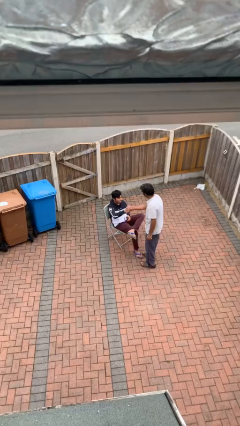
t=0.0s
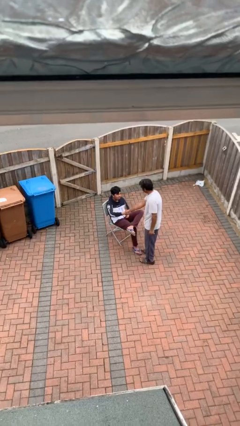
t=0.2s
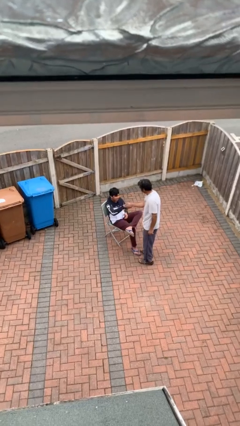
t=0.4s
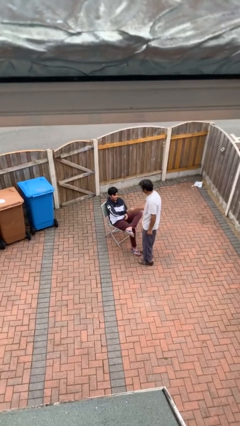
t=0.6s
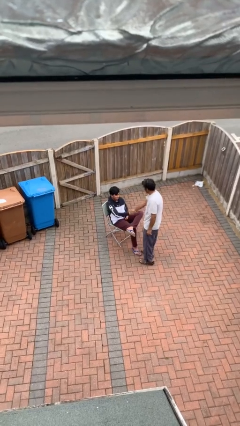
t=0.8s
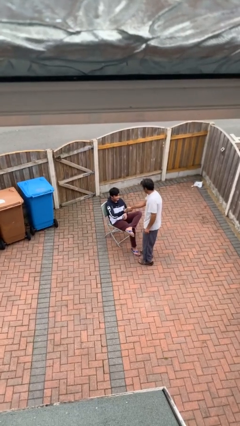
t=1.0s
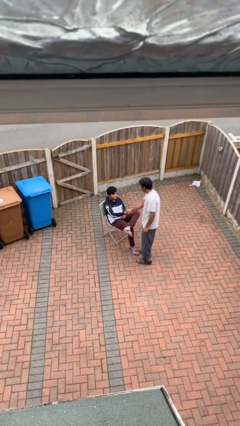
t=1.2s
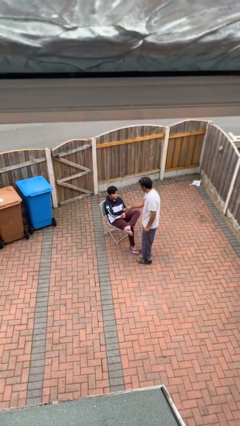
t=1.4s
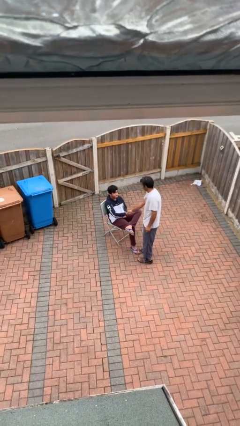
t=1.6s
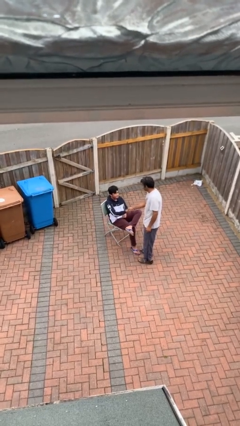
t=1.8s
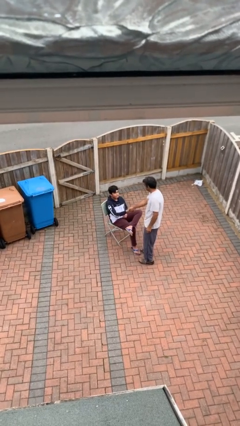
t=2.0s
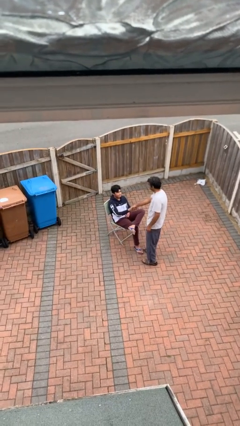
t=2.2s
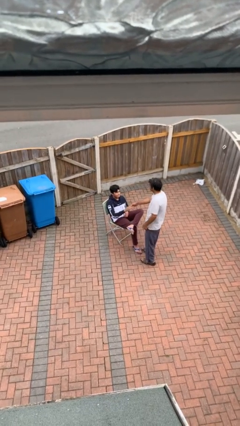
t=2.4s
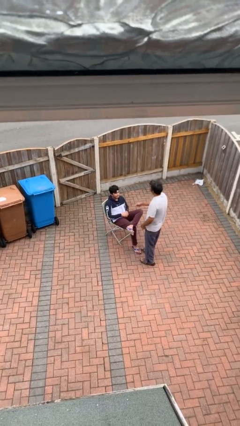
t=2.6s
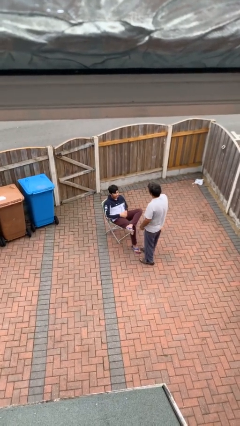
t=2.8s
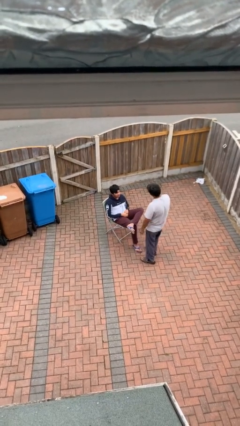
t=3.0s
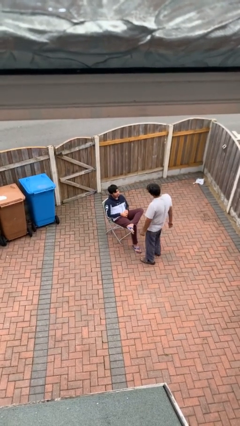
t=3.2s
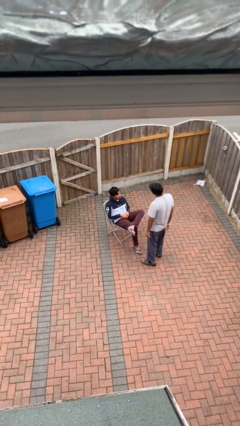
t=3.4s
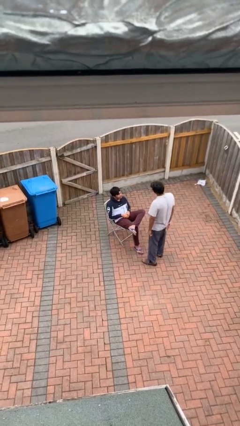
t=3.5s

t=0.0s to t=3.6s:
person shakes hand

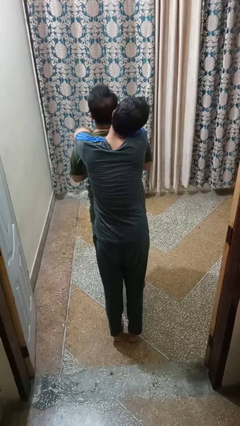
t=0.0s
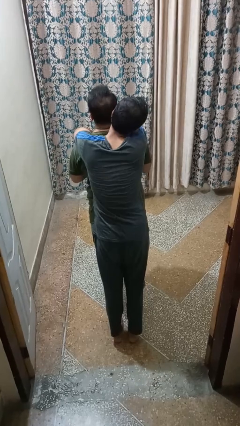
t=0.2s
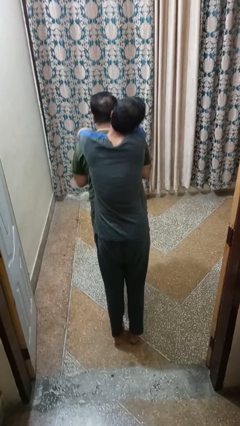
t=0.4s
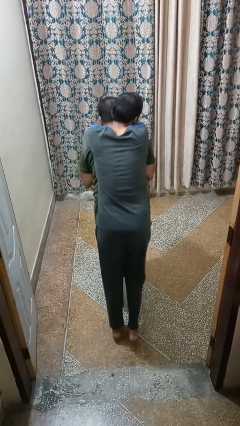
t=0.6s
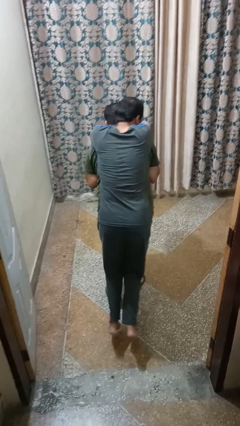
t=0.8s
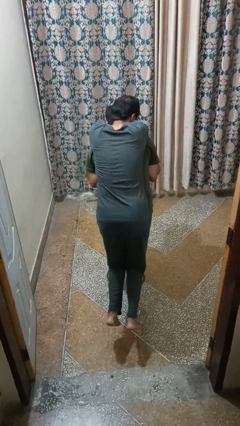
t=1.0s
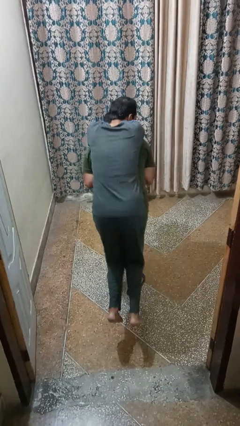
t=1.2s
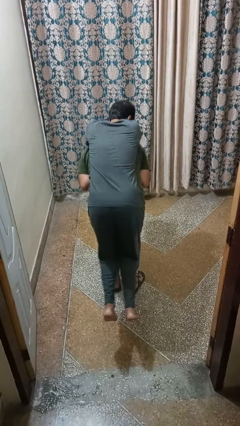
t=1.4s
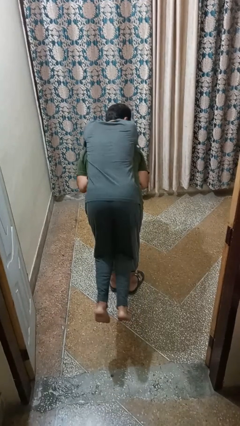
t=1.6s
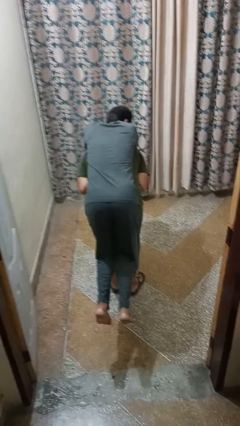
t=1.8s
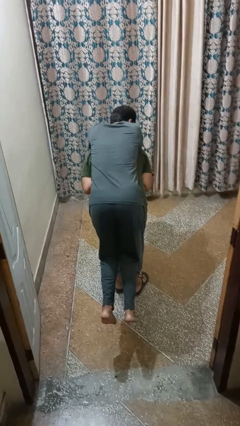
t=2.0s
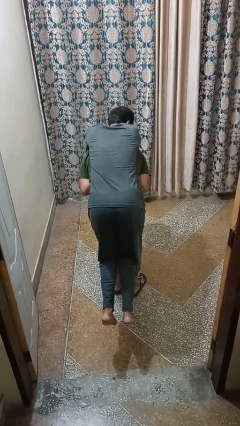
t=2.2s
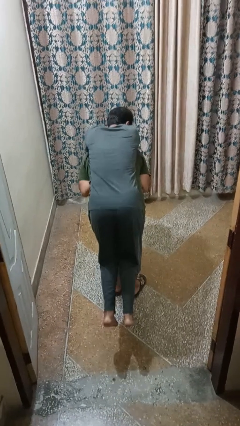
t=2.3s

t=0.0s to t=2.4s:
person carries person on back

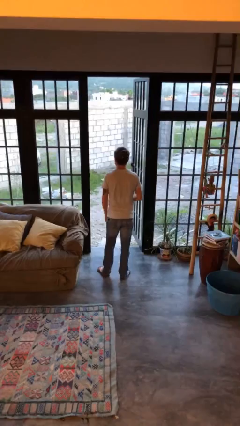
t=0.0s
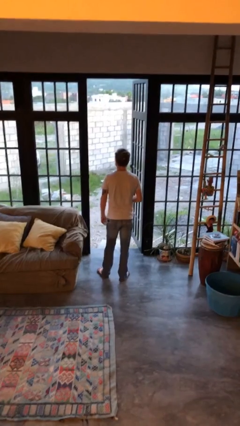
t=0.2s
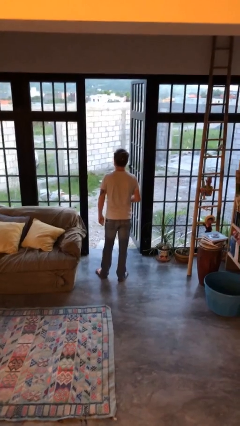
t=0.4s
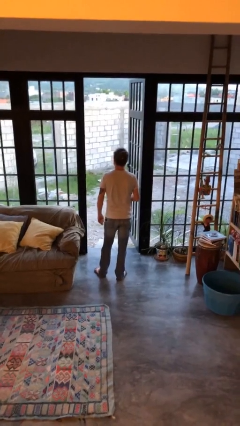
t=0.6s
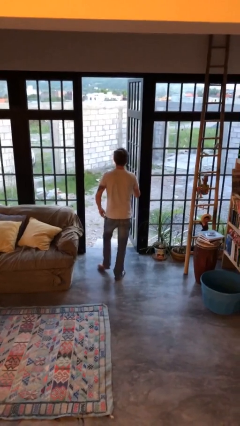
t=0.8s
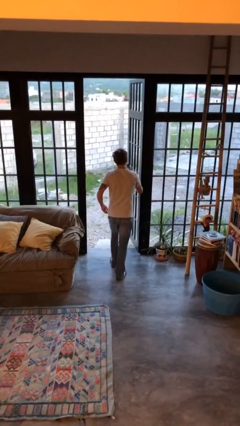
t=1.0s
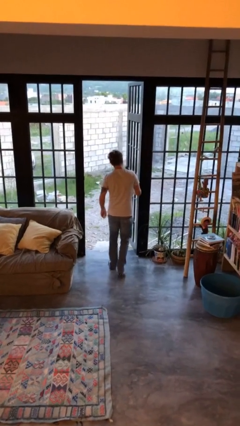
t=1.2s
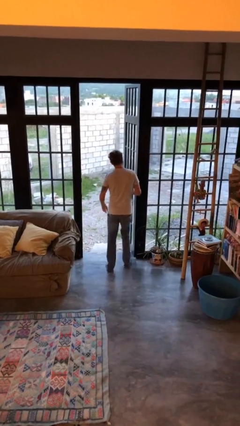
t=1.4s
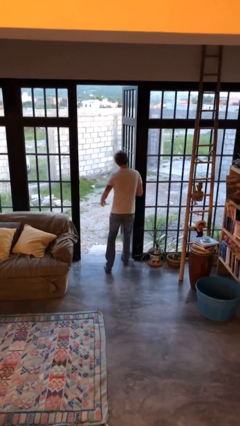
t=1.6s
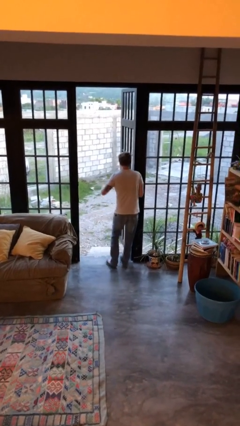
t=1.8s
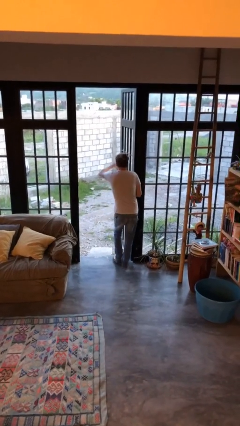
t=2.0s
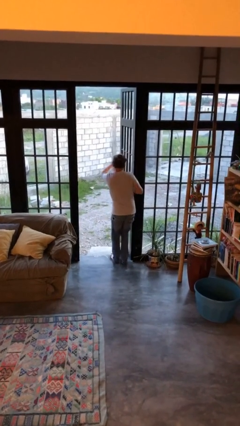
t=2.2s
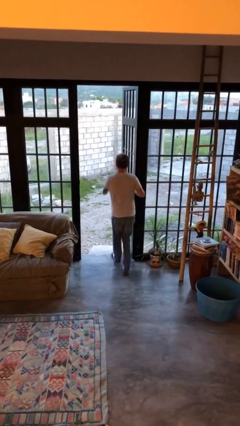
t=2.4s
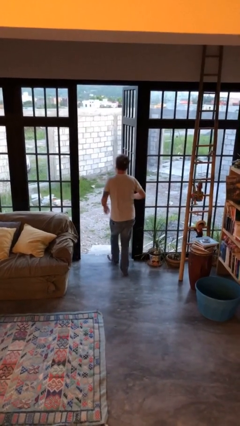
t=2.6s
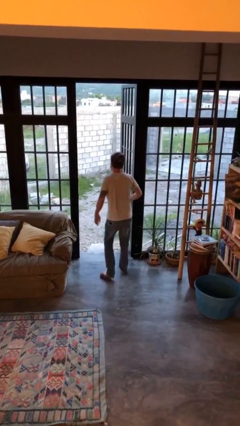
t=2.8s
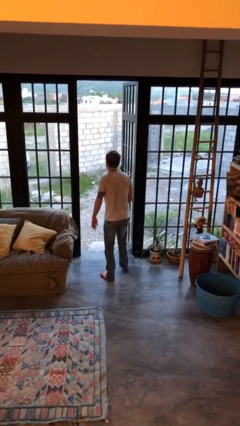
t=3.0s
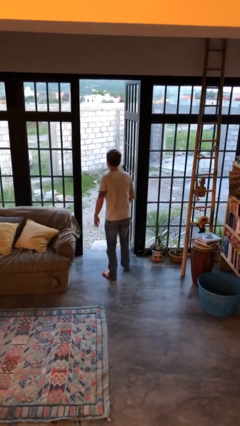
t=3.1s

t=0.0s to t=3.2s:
person bumps into wall

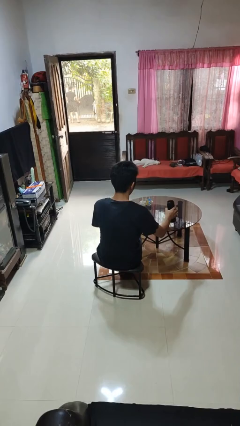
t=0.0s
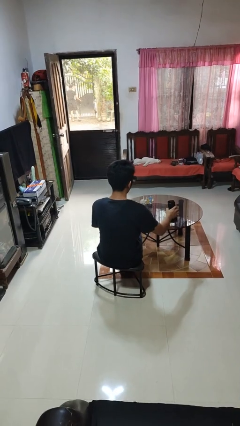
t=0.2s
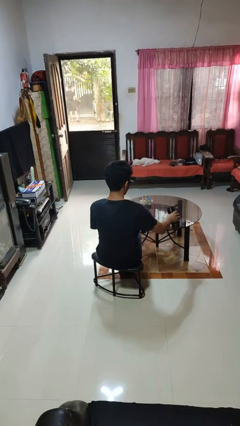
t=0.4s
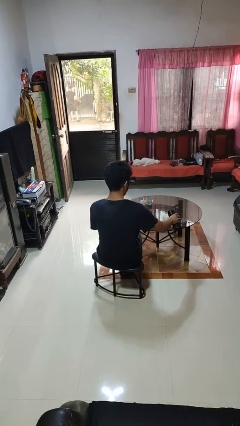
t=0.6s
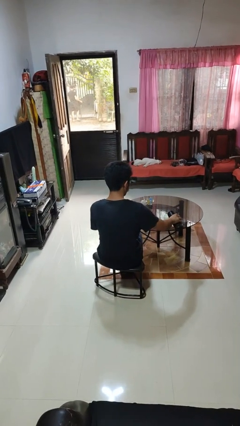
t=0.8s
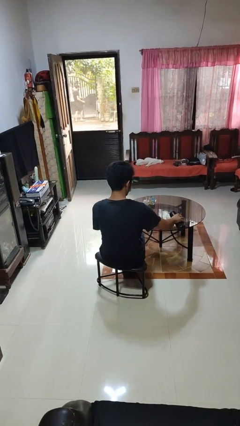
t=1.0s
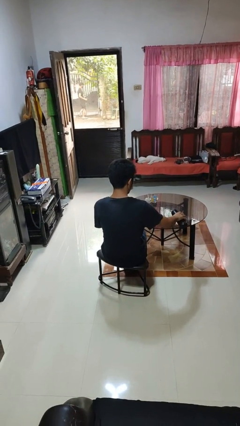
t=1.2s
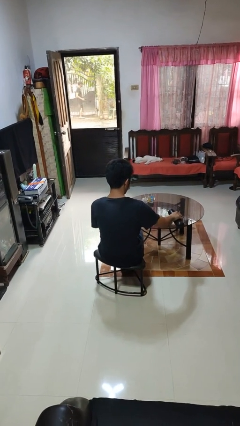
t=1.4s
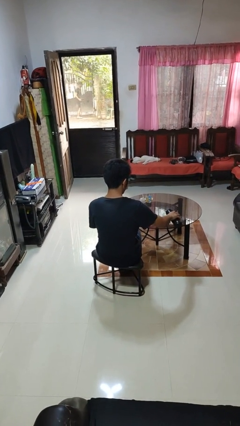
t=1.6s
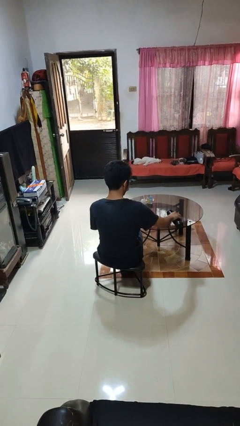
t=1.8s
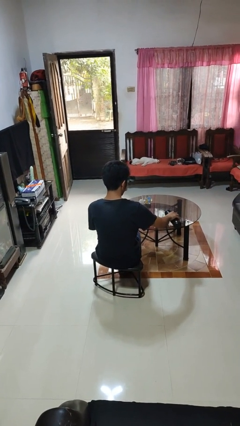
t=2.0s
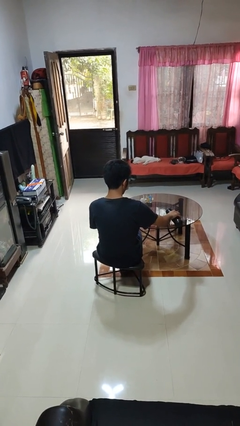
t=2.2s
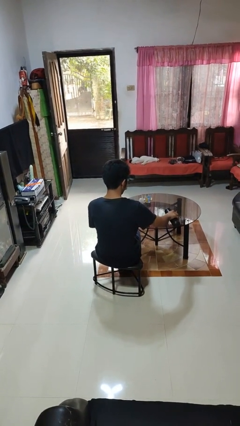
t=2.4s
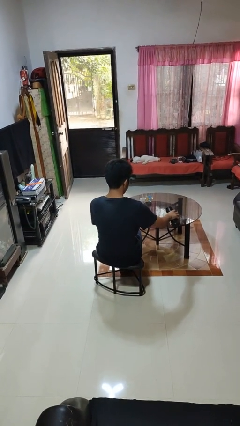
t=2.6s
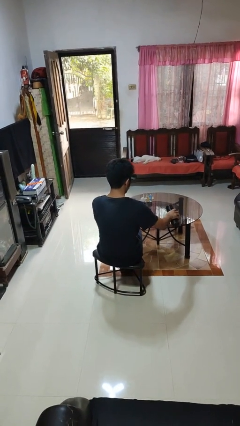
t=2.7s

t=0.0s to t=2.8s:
person pours liquid into cup

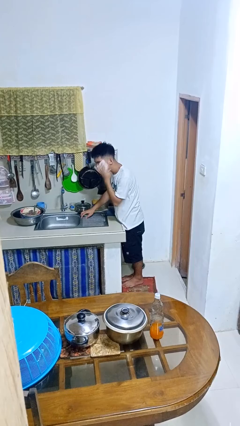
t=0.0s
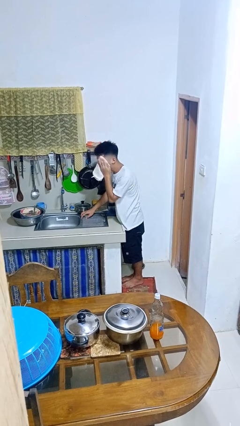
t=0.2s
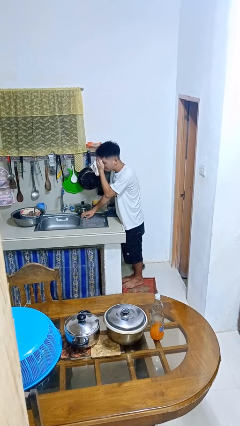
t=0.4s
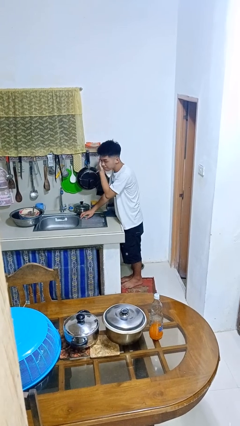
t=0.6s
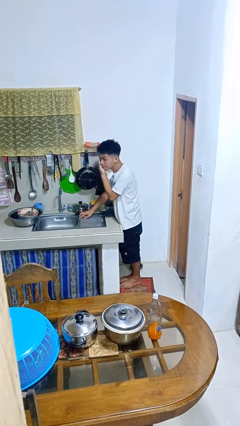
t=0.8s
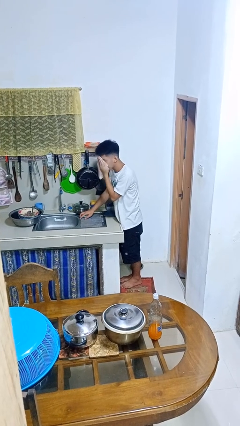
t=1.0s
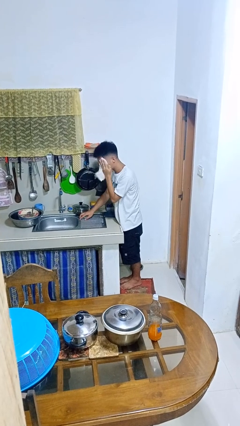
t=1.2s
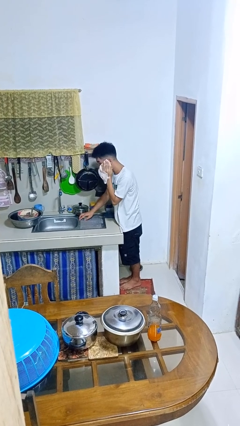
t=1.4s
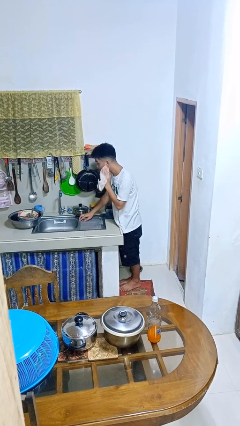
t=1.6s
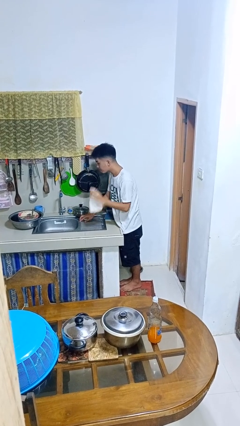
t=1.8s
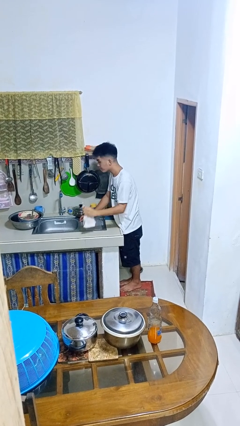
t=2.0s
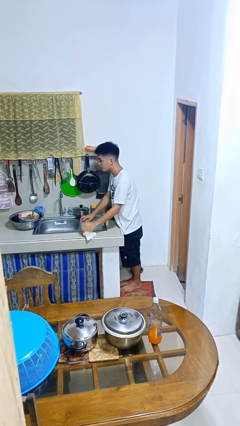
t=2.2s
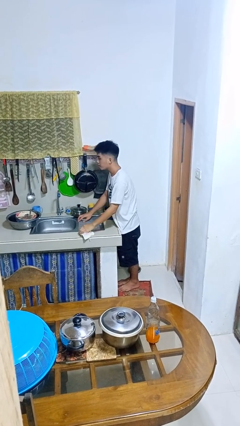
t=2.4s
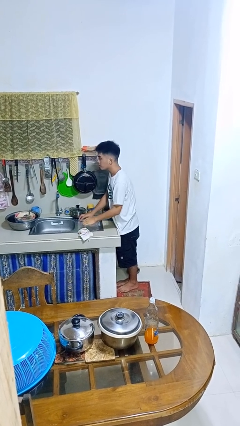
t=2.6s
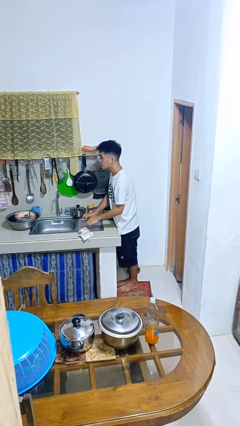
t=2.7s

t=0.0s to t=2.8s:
person dries face with towel

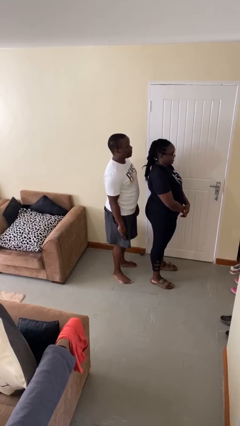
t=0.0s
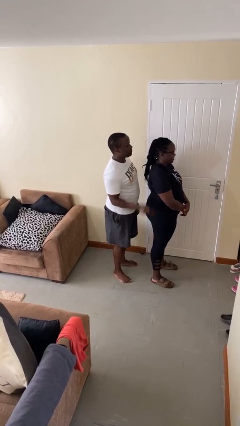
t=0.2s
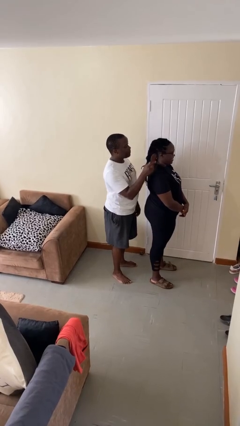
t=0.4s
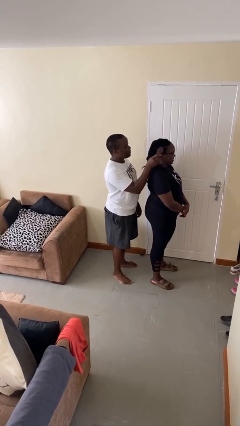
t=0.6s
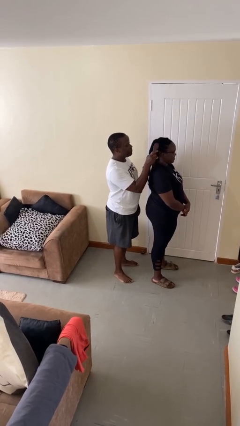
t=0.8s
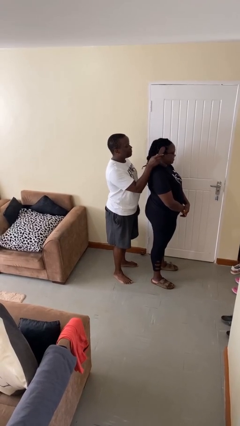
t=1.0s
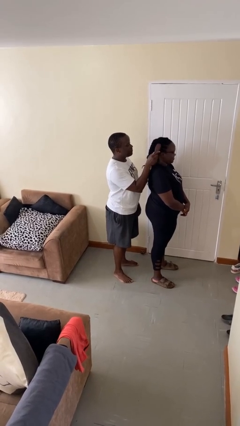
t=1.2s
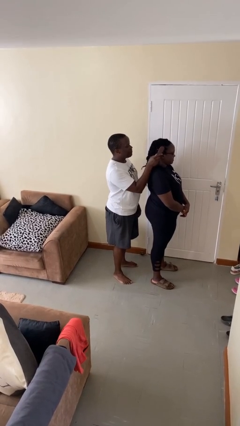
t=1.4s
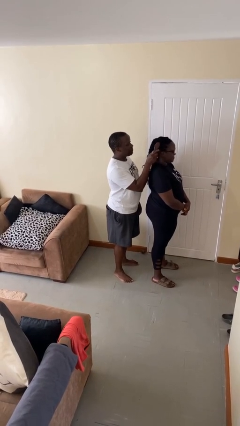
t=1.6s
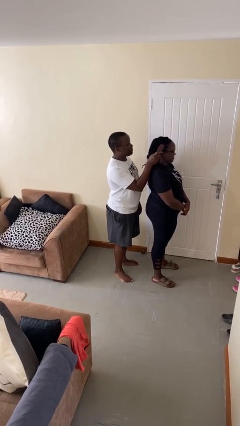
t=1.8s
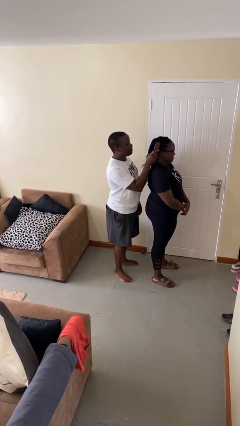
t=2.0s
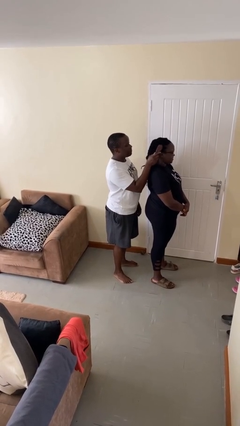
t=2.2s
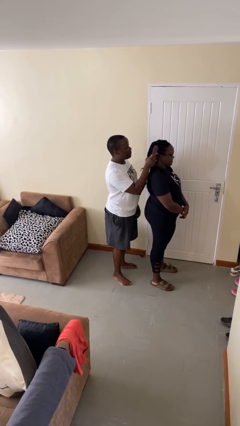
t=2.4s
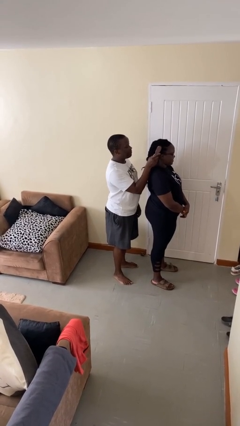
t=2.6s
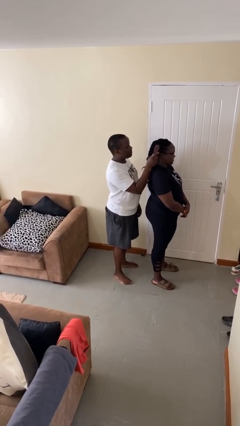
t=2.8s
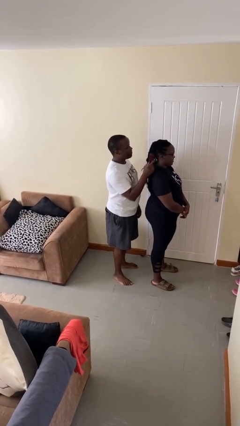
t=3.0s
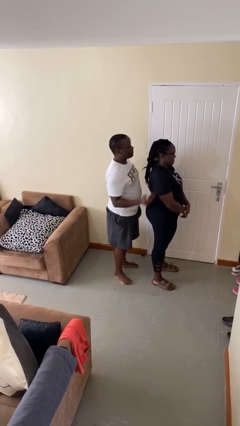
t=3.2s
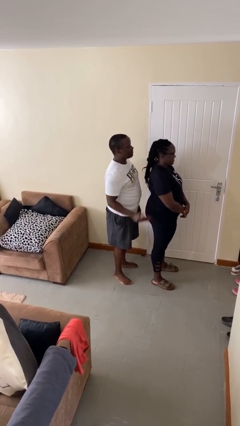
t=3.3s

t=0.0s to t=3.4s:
person brushes hair of person
